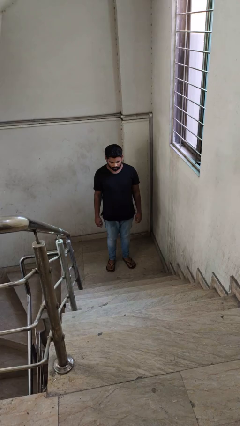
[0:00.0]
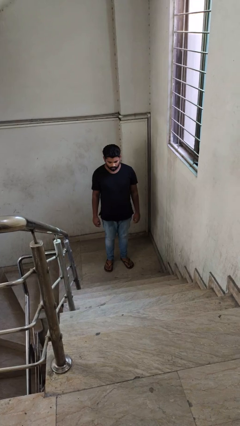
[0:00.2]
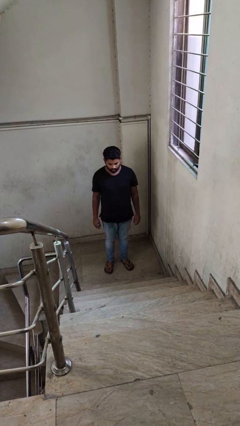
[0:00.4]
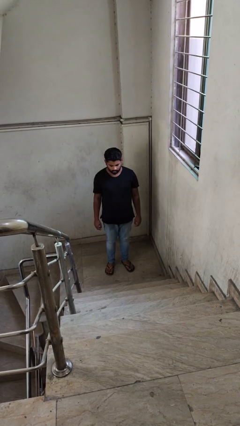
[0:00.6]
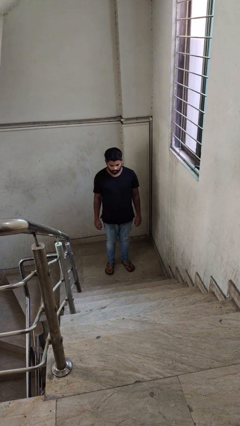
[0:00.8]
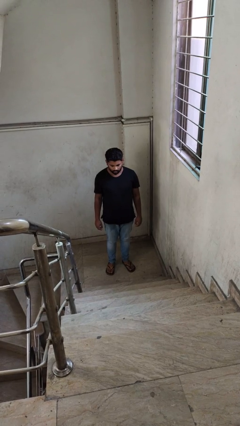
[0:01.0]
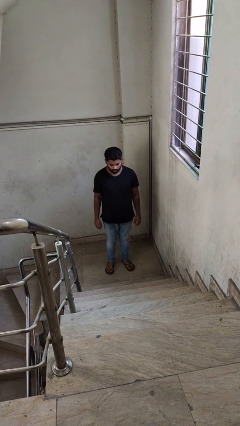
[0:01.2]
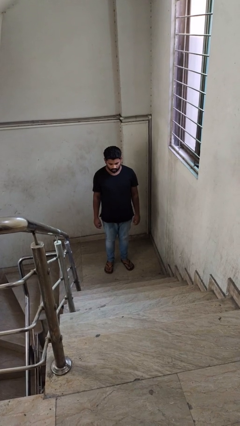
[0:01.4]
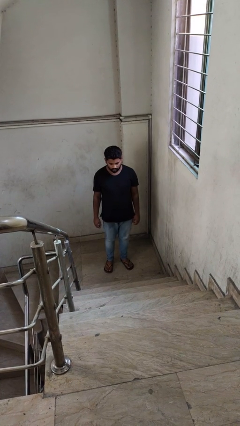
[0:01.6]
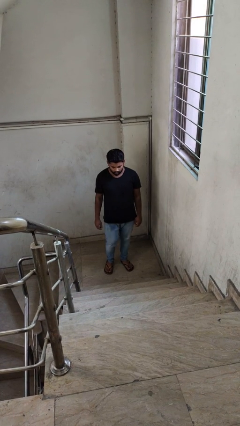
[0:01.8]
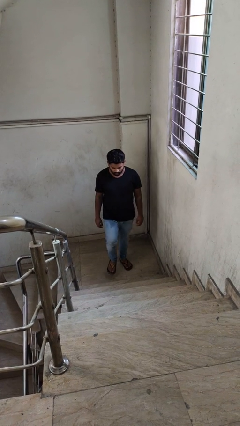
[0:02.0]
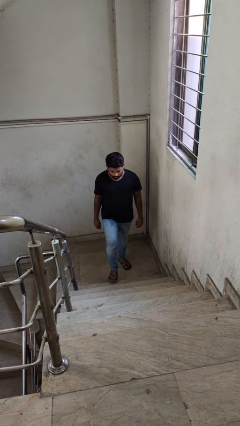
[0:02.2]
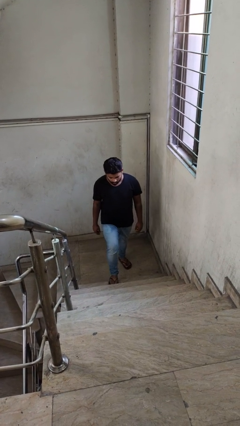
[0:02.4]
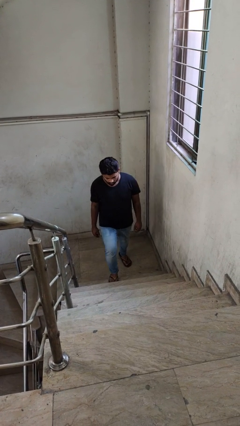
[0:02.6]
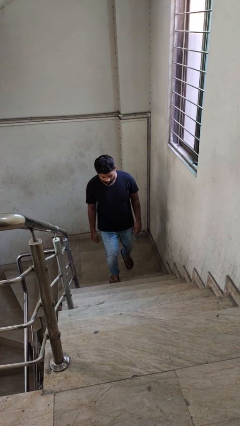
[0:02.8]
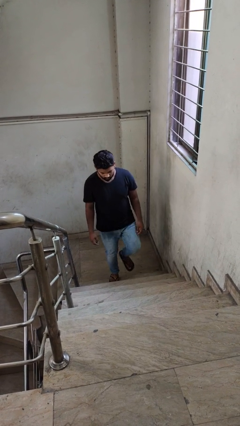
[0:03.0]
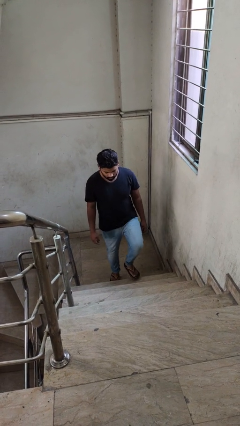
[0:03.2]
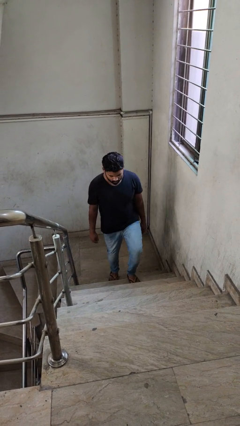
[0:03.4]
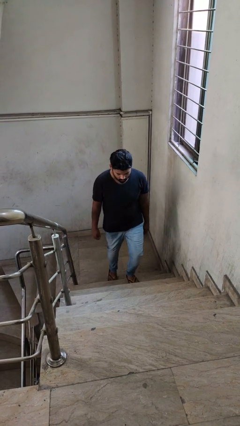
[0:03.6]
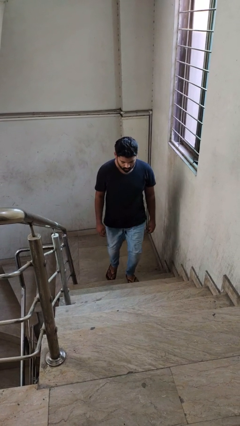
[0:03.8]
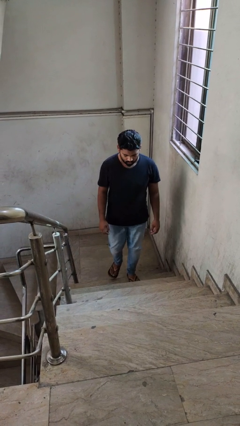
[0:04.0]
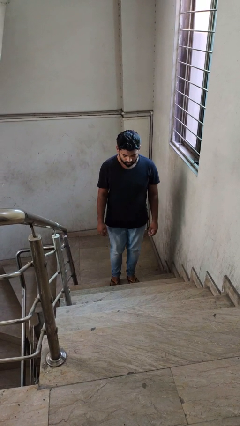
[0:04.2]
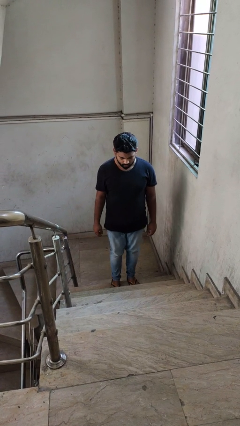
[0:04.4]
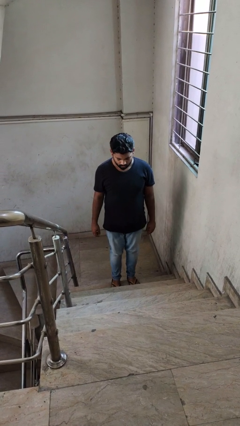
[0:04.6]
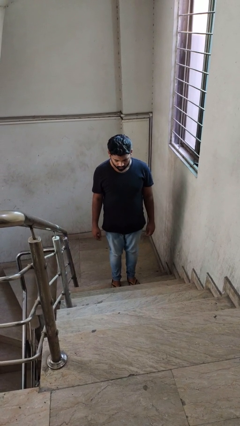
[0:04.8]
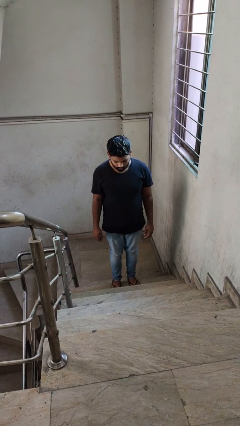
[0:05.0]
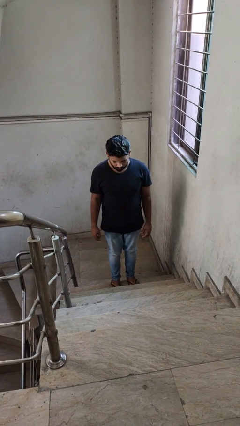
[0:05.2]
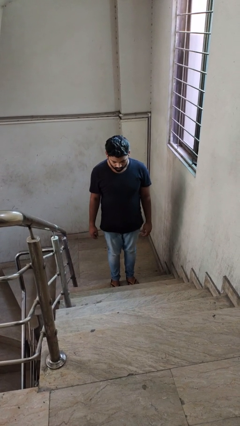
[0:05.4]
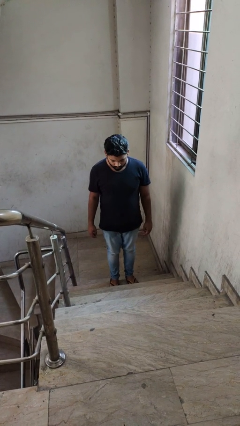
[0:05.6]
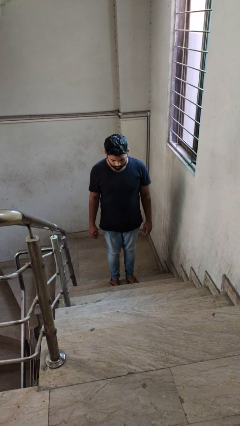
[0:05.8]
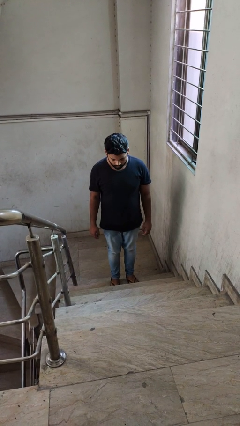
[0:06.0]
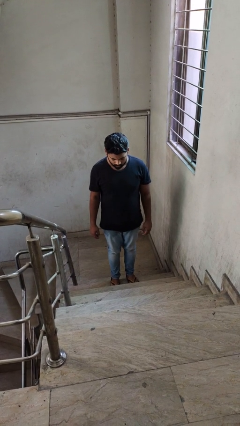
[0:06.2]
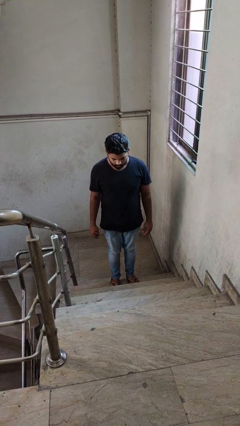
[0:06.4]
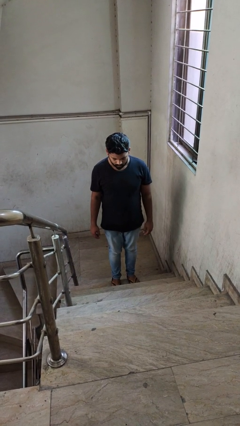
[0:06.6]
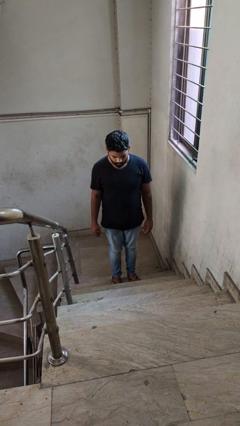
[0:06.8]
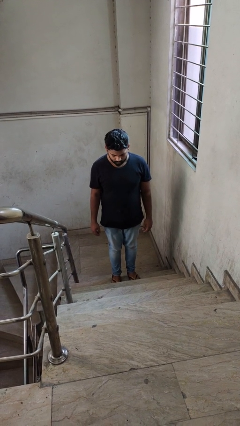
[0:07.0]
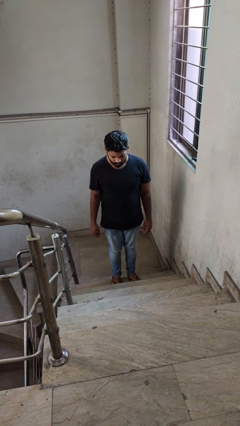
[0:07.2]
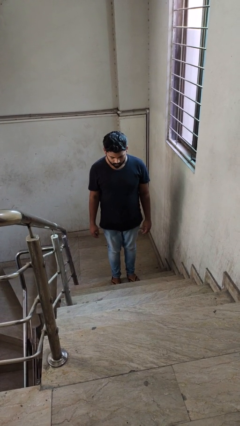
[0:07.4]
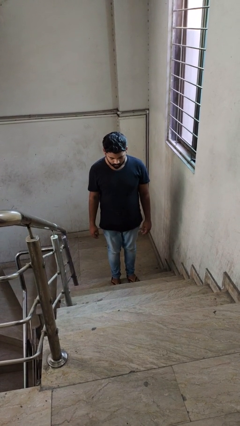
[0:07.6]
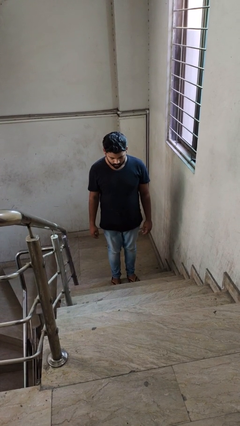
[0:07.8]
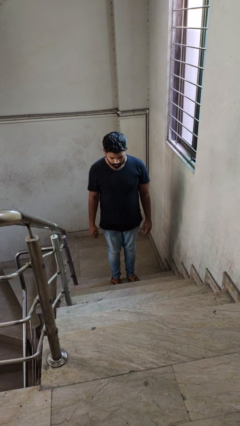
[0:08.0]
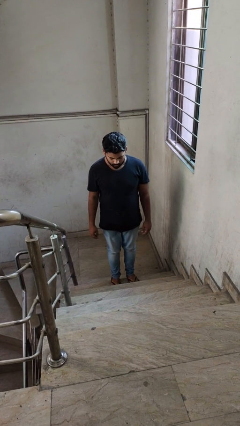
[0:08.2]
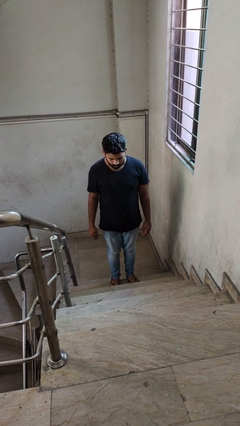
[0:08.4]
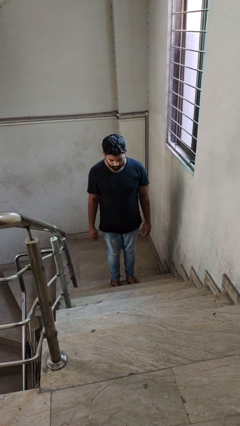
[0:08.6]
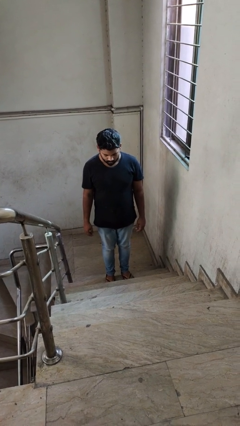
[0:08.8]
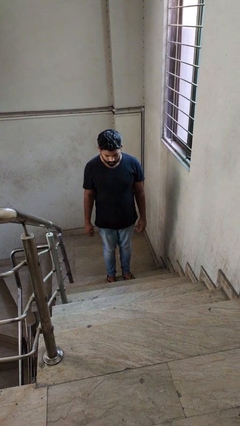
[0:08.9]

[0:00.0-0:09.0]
person climbs up stairs

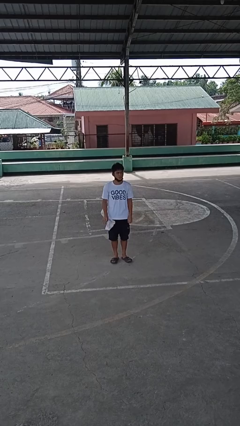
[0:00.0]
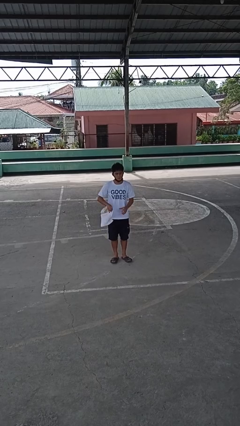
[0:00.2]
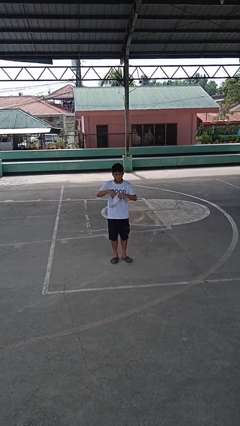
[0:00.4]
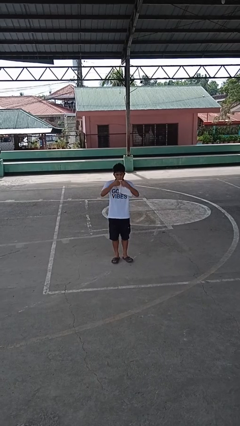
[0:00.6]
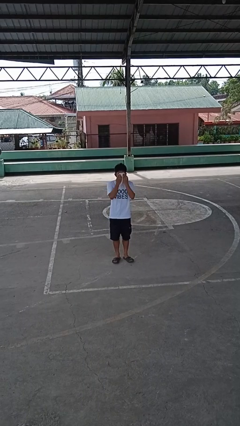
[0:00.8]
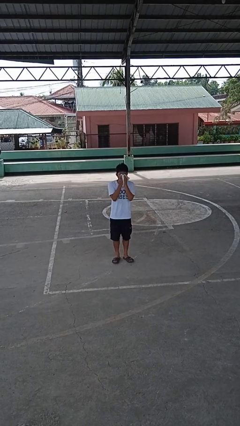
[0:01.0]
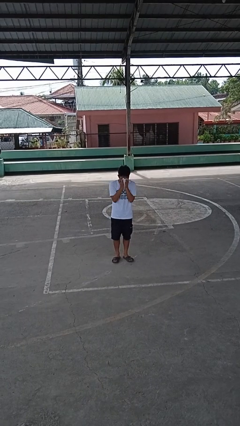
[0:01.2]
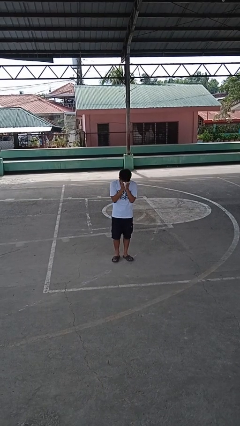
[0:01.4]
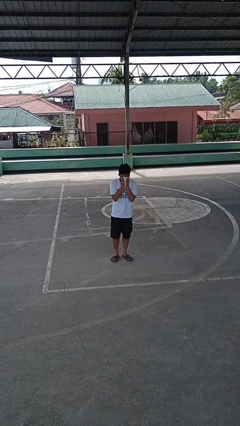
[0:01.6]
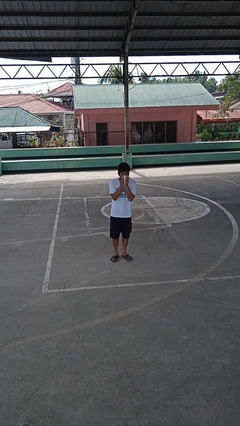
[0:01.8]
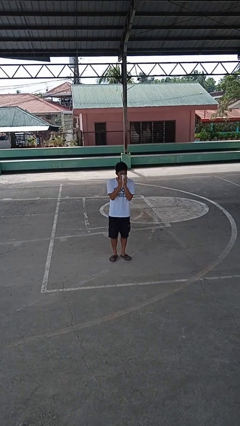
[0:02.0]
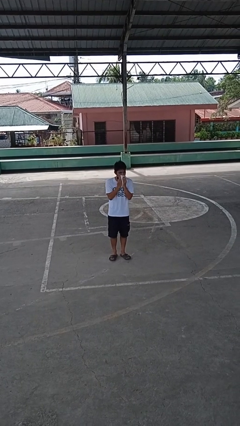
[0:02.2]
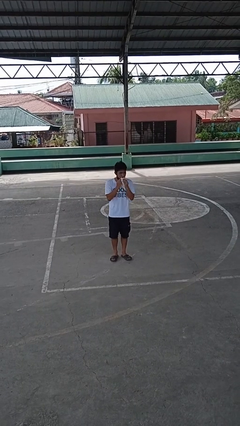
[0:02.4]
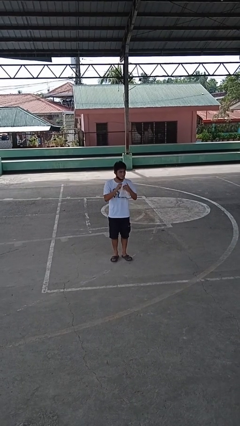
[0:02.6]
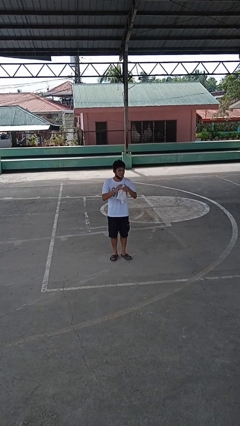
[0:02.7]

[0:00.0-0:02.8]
person blows nose

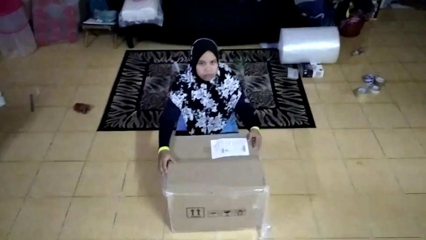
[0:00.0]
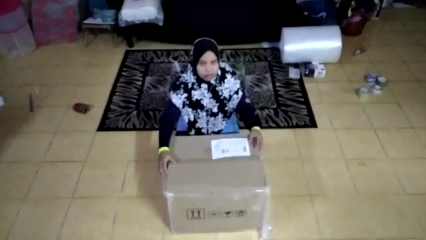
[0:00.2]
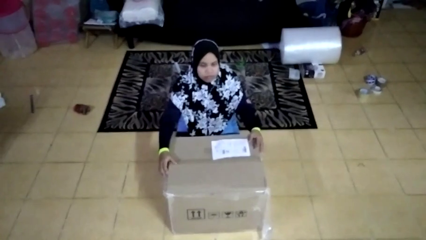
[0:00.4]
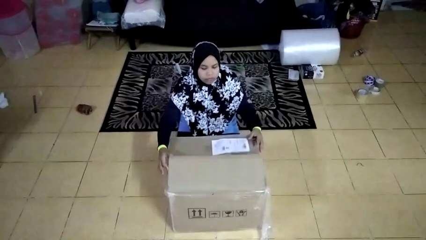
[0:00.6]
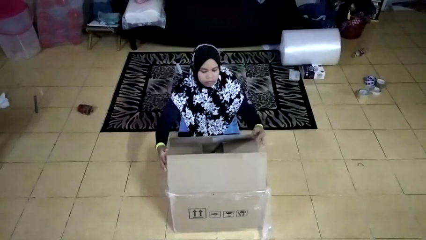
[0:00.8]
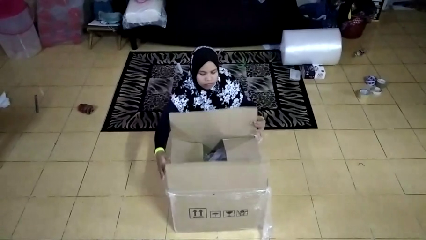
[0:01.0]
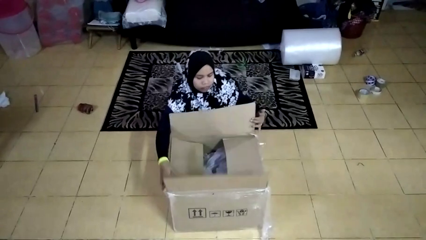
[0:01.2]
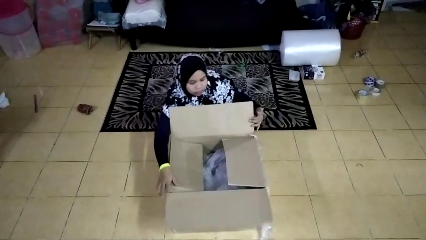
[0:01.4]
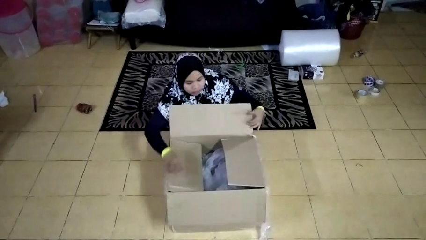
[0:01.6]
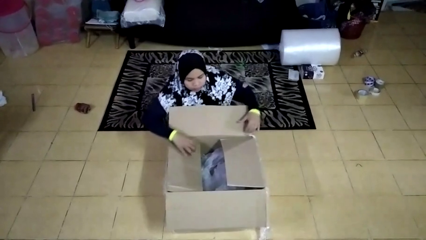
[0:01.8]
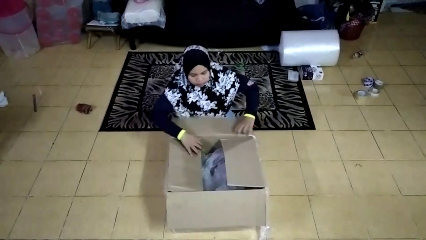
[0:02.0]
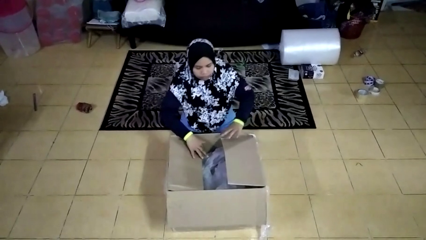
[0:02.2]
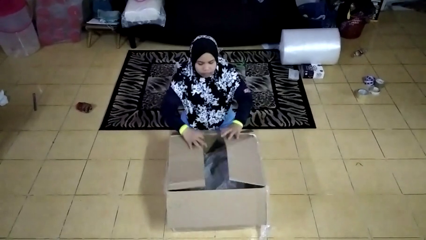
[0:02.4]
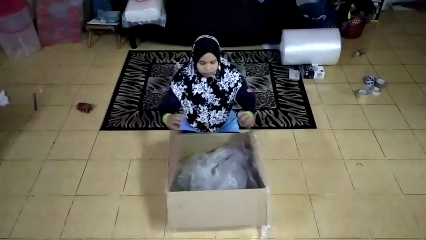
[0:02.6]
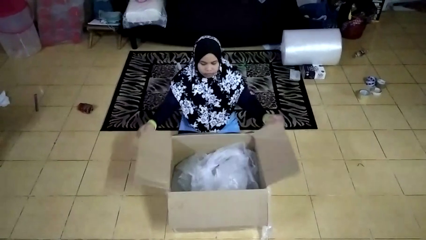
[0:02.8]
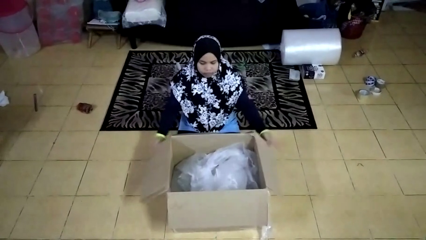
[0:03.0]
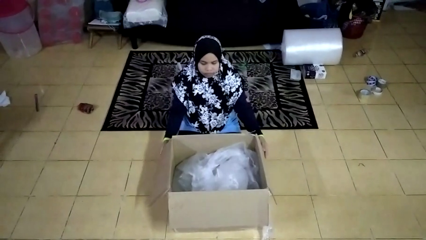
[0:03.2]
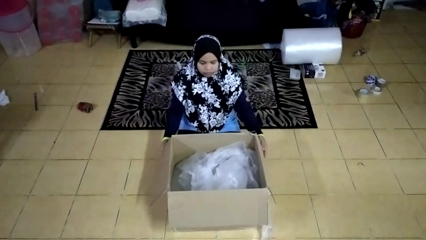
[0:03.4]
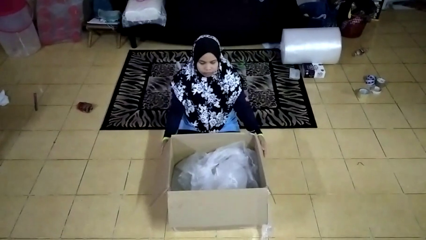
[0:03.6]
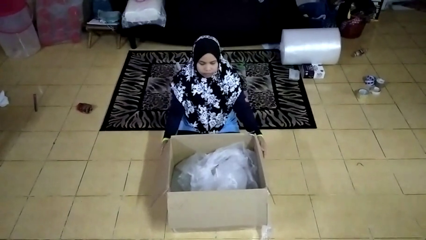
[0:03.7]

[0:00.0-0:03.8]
person opens box

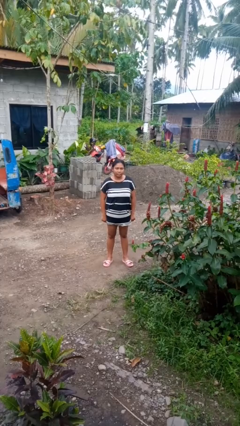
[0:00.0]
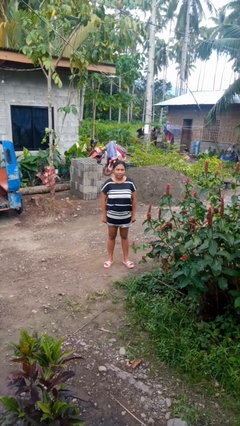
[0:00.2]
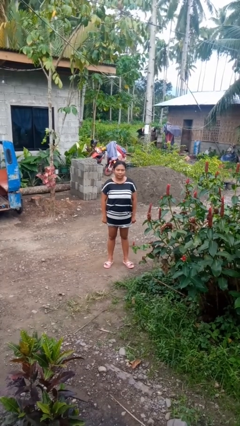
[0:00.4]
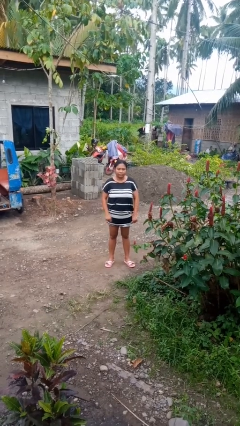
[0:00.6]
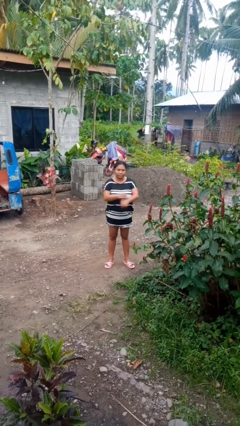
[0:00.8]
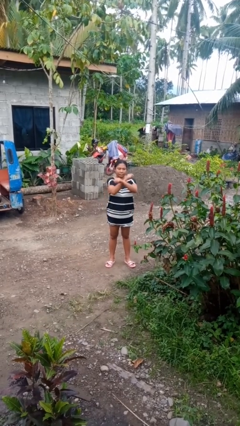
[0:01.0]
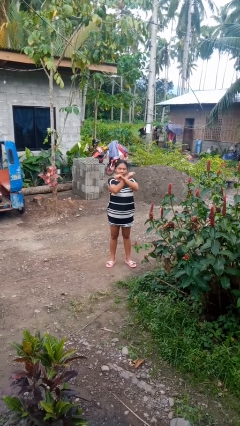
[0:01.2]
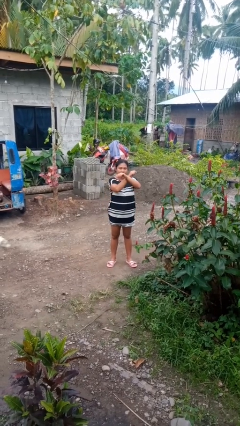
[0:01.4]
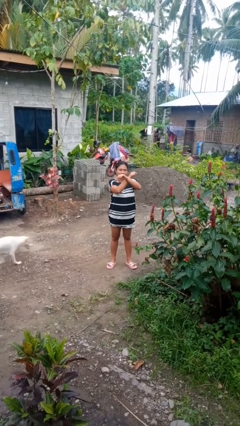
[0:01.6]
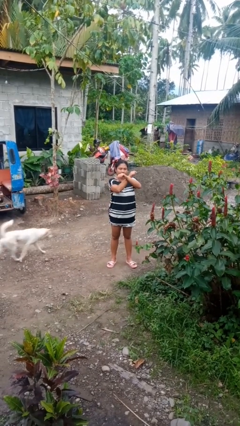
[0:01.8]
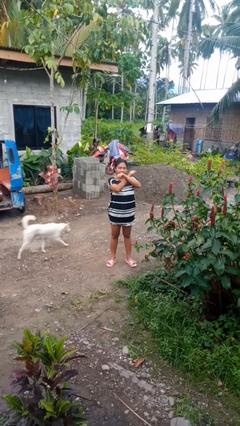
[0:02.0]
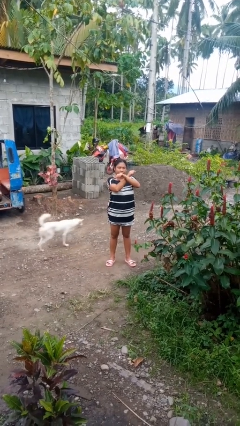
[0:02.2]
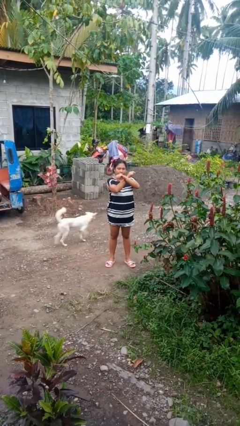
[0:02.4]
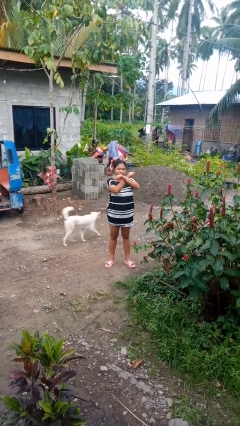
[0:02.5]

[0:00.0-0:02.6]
person gestures arms x
